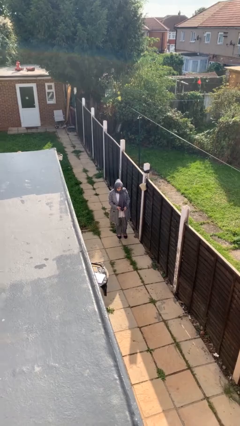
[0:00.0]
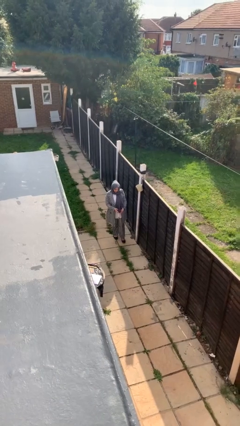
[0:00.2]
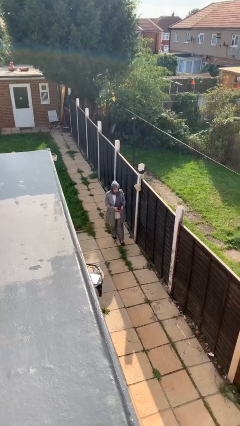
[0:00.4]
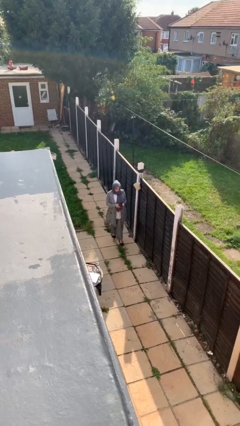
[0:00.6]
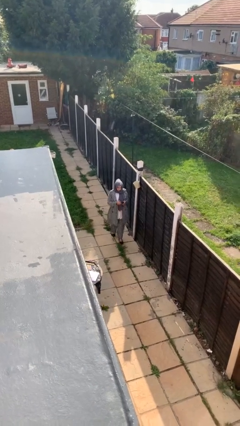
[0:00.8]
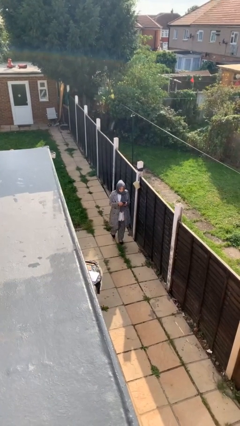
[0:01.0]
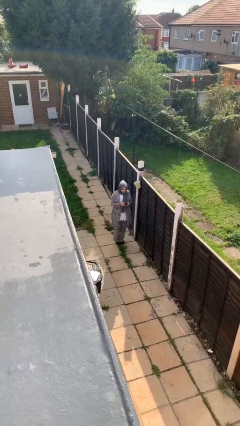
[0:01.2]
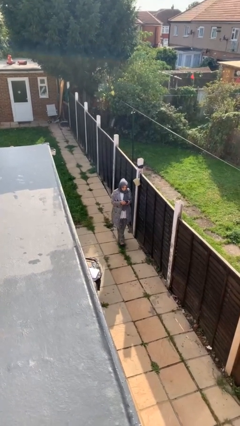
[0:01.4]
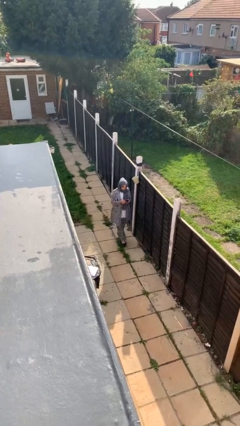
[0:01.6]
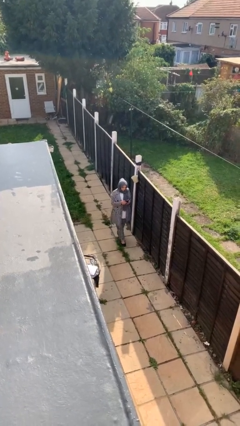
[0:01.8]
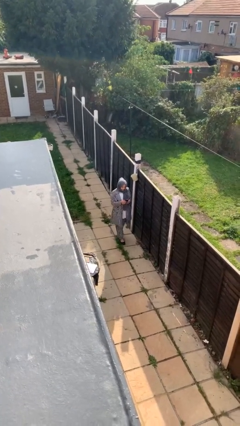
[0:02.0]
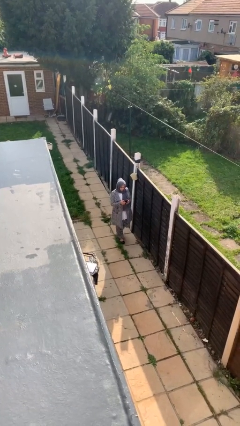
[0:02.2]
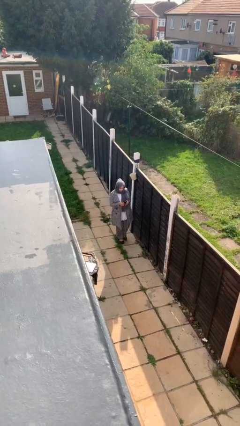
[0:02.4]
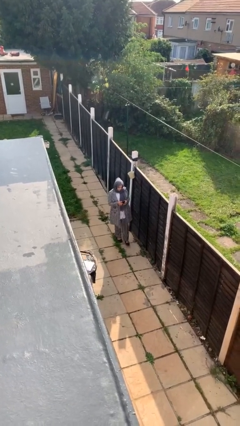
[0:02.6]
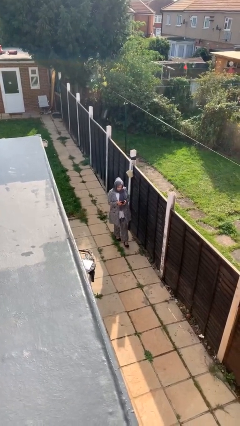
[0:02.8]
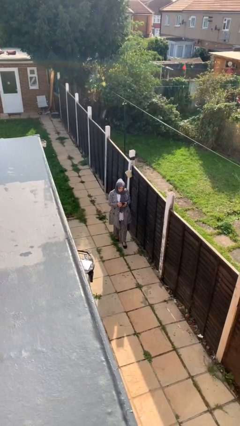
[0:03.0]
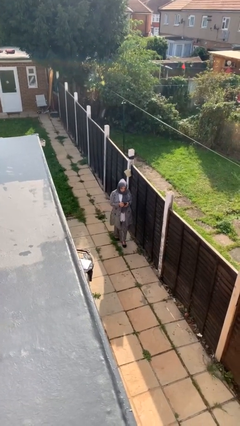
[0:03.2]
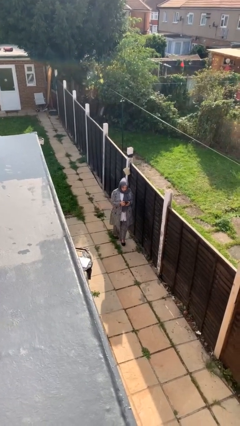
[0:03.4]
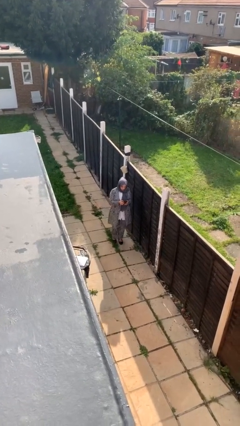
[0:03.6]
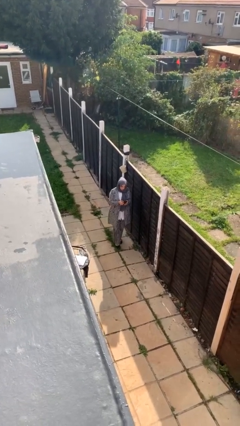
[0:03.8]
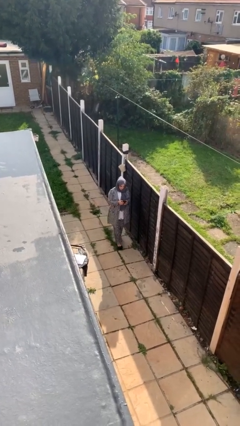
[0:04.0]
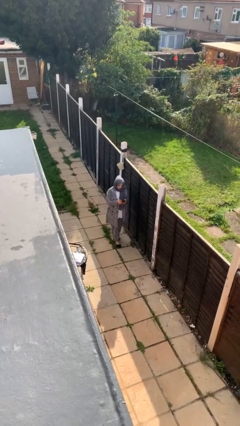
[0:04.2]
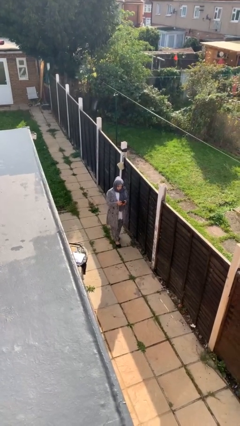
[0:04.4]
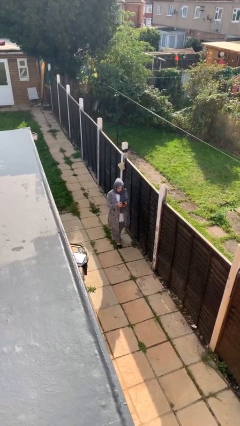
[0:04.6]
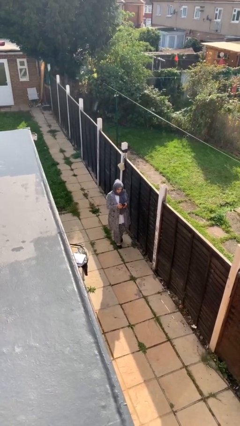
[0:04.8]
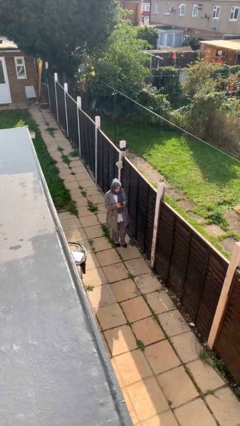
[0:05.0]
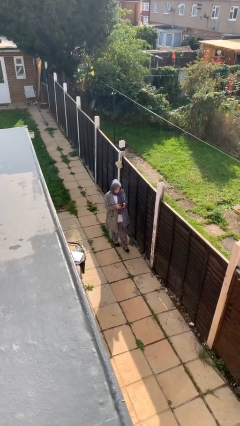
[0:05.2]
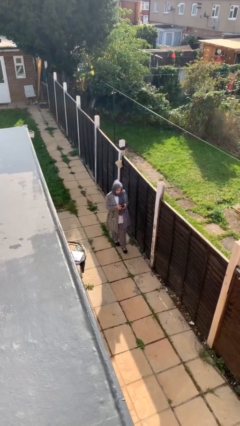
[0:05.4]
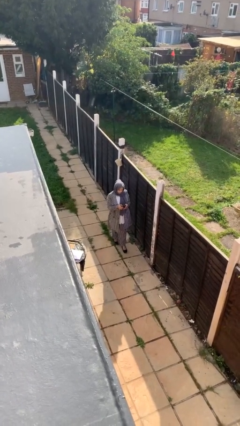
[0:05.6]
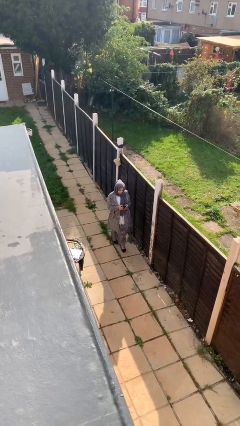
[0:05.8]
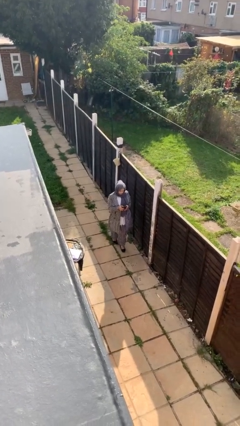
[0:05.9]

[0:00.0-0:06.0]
person texts on phone

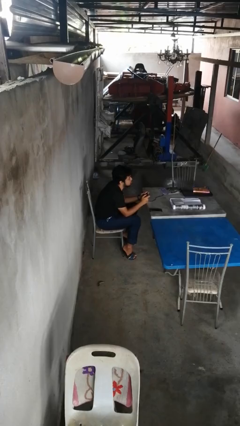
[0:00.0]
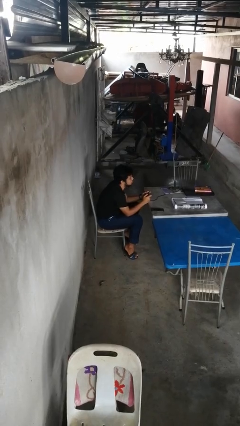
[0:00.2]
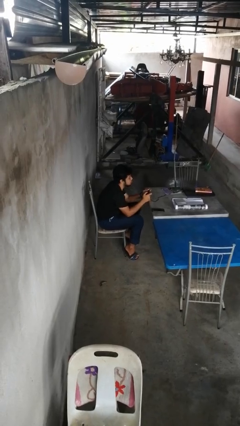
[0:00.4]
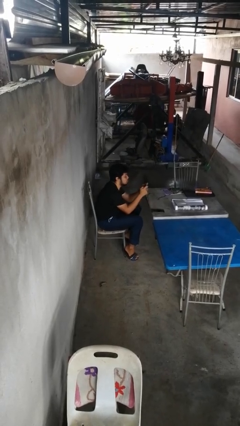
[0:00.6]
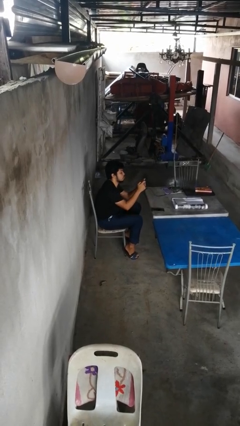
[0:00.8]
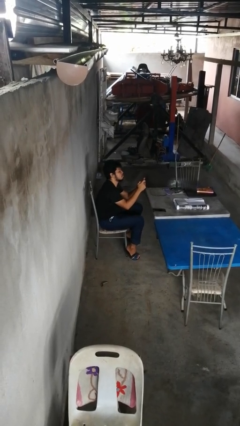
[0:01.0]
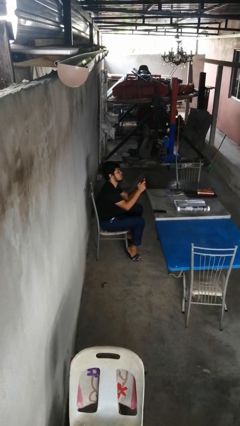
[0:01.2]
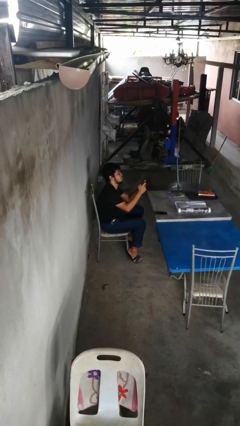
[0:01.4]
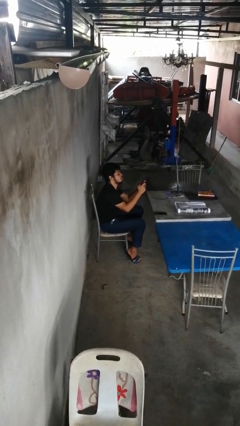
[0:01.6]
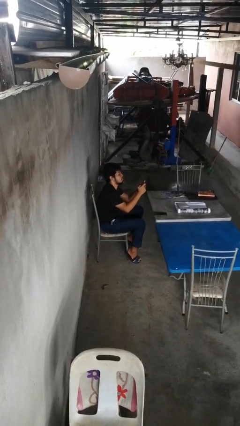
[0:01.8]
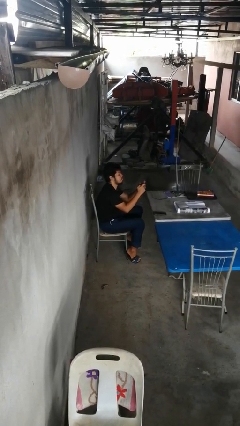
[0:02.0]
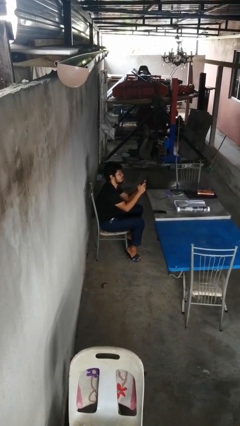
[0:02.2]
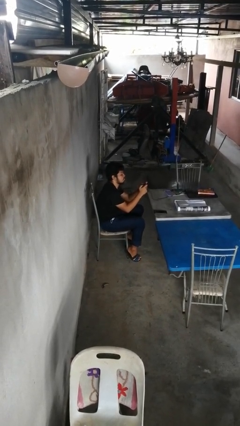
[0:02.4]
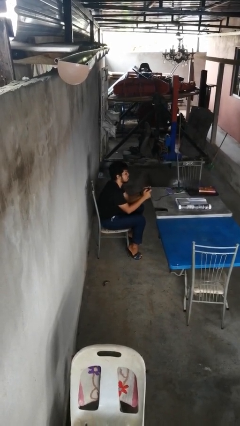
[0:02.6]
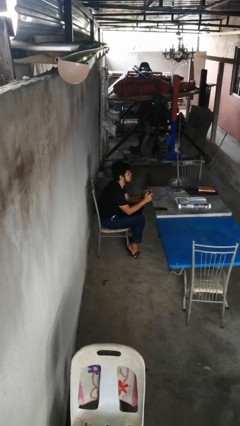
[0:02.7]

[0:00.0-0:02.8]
person interacts with handheld game

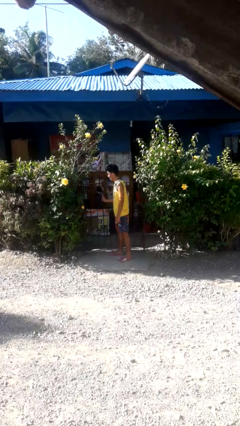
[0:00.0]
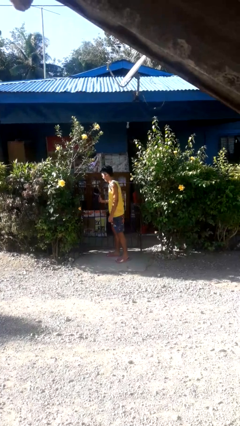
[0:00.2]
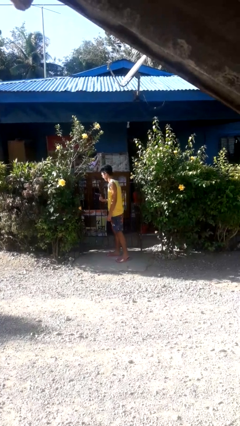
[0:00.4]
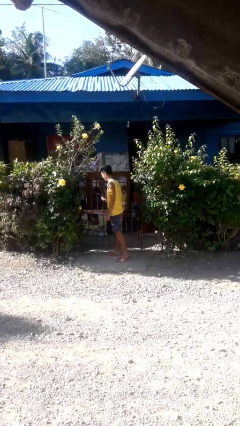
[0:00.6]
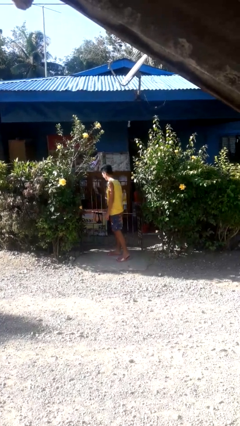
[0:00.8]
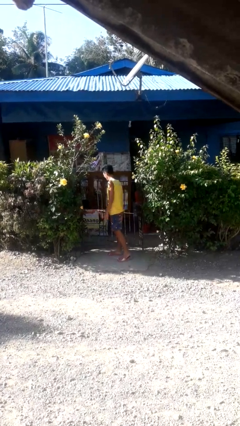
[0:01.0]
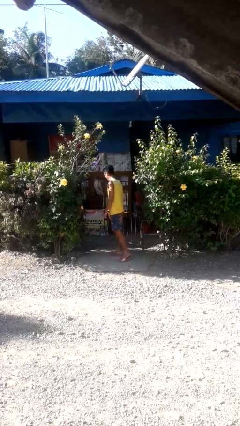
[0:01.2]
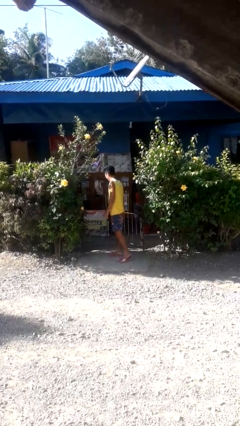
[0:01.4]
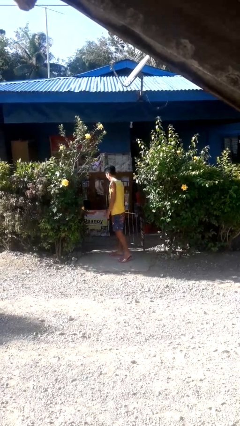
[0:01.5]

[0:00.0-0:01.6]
person opens gate

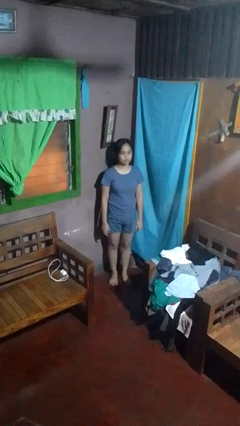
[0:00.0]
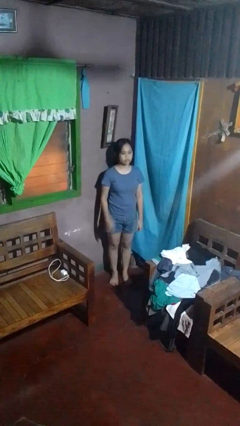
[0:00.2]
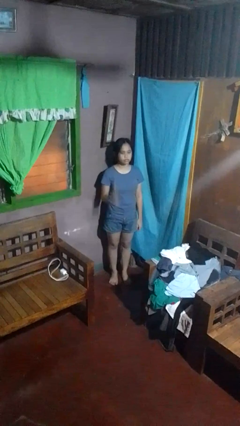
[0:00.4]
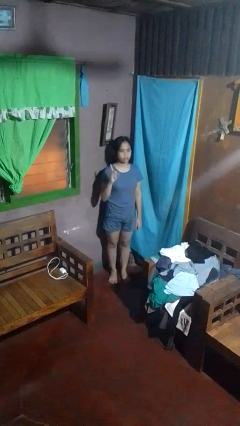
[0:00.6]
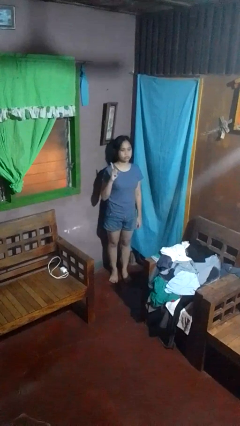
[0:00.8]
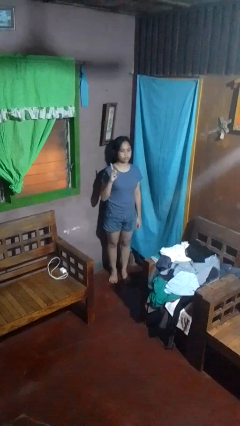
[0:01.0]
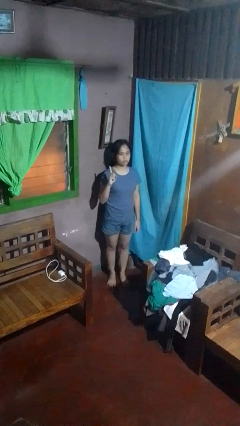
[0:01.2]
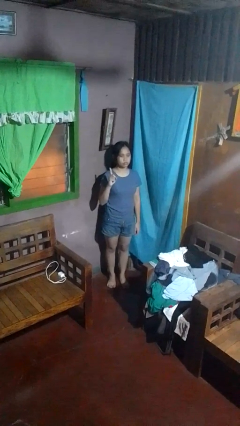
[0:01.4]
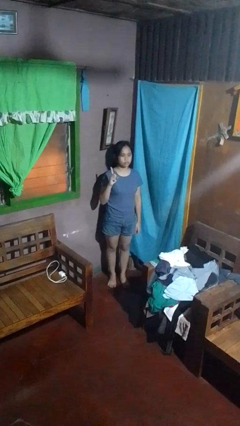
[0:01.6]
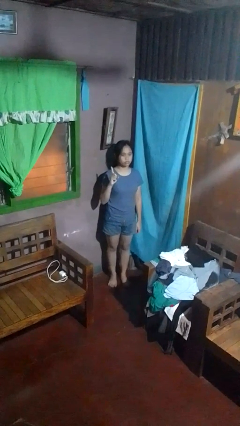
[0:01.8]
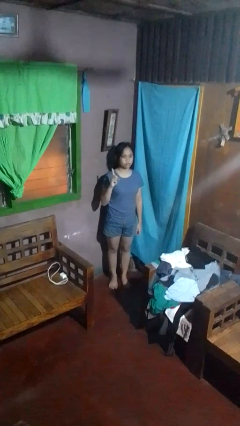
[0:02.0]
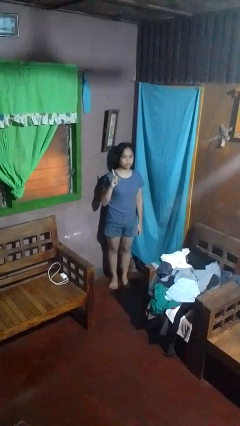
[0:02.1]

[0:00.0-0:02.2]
person gestures number one

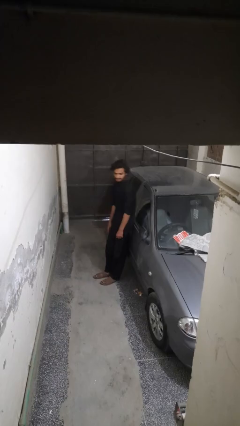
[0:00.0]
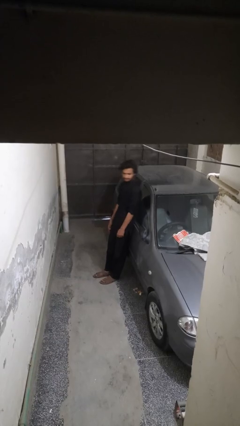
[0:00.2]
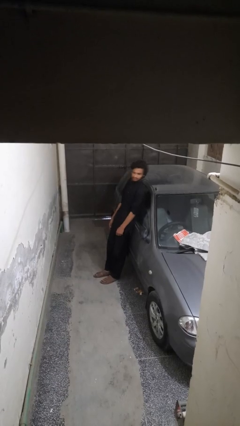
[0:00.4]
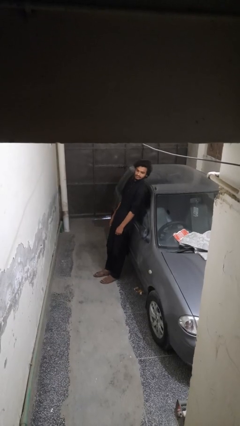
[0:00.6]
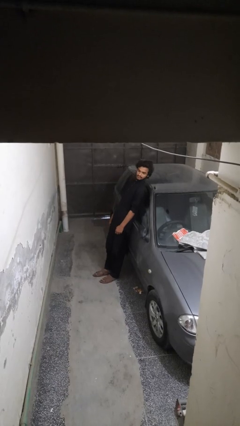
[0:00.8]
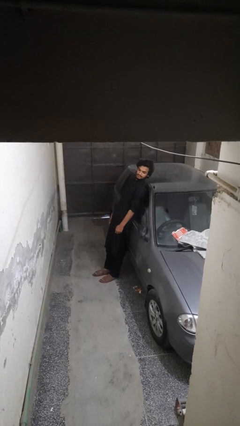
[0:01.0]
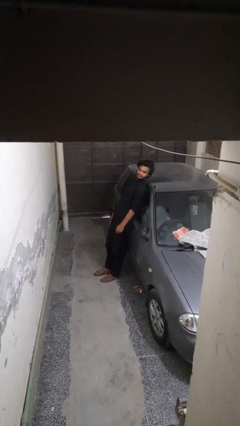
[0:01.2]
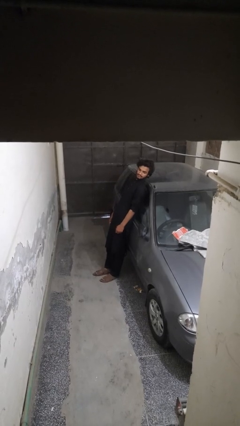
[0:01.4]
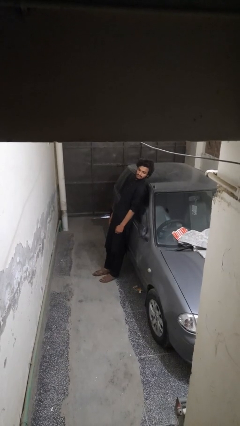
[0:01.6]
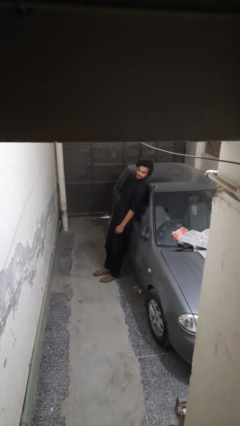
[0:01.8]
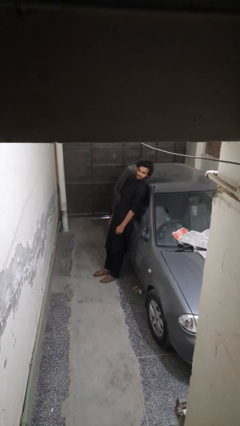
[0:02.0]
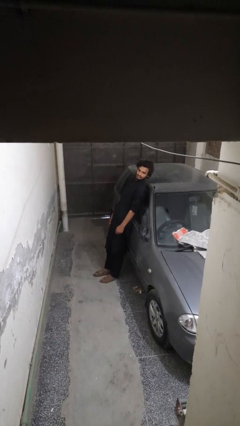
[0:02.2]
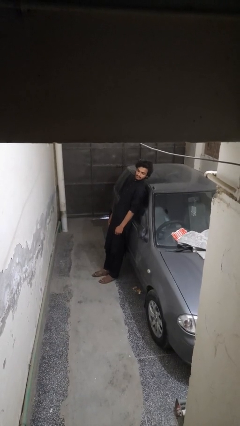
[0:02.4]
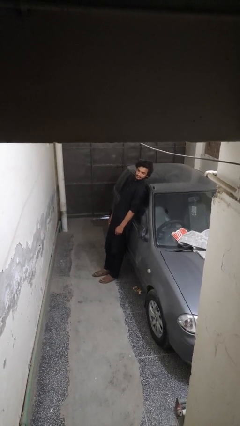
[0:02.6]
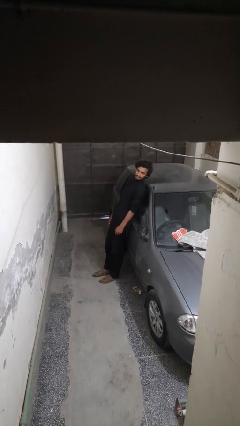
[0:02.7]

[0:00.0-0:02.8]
person leans against car

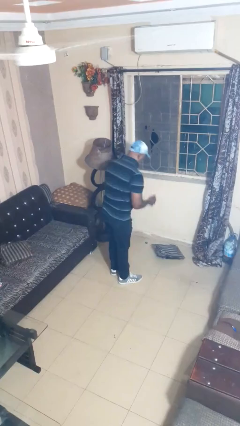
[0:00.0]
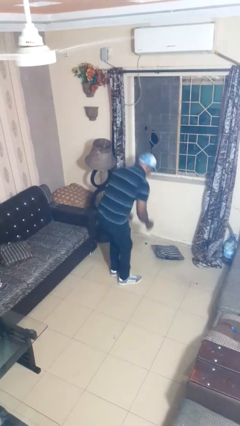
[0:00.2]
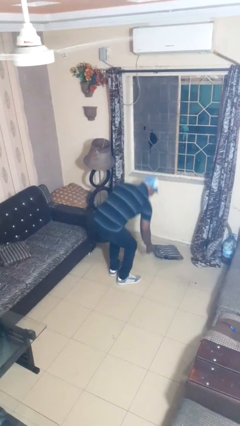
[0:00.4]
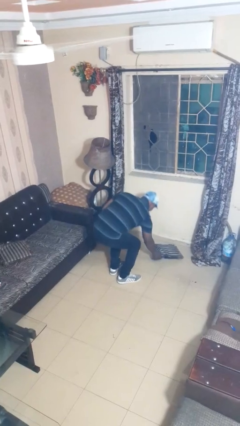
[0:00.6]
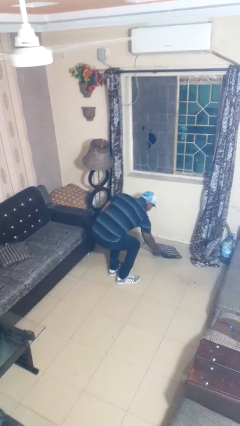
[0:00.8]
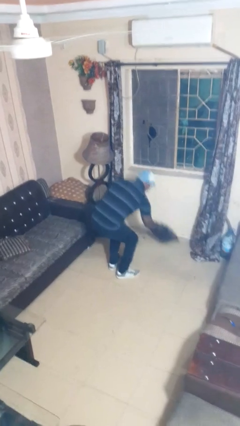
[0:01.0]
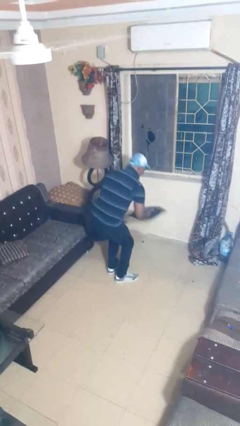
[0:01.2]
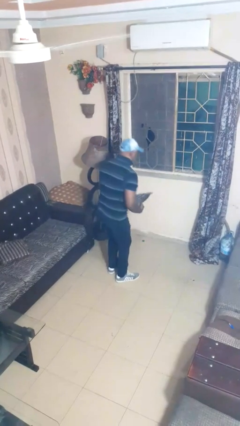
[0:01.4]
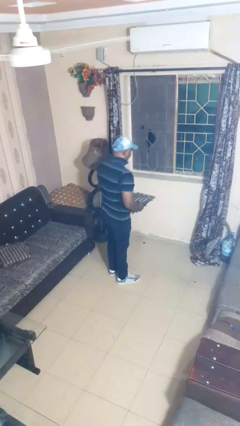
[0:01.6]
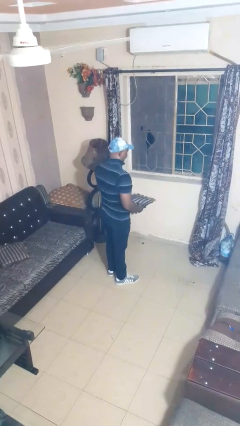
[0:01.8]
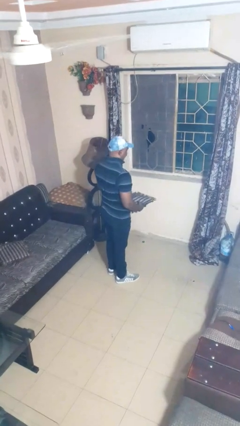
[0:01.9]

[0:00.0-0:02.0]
person picks up object from floor
